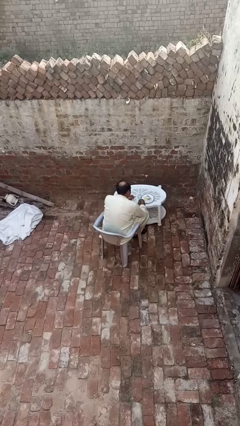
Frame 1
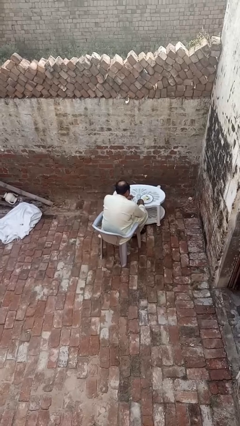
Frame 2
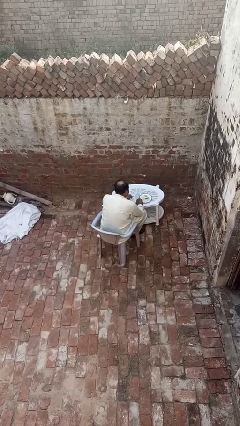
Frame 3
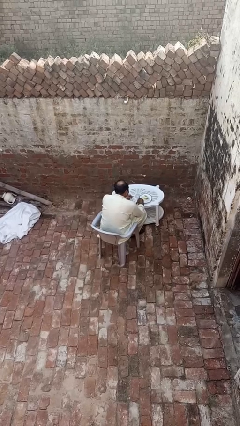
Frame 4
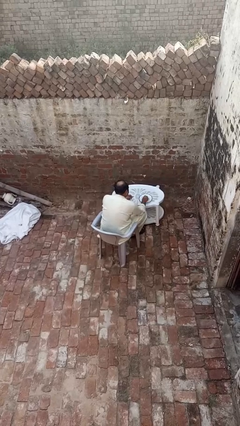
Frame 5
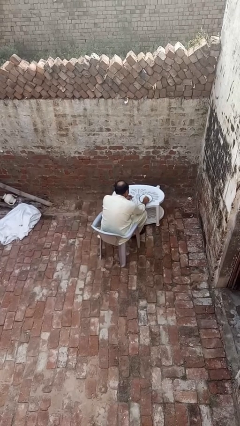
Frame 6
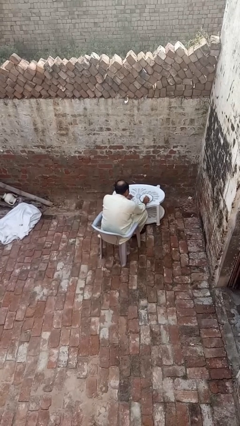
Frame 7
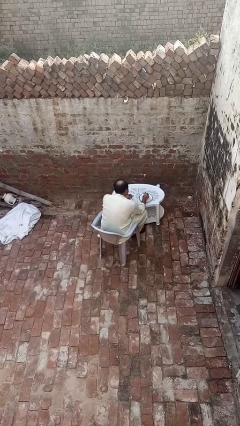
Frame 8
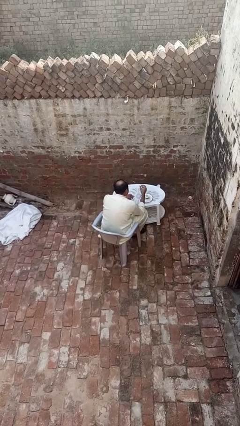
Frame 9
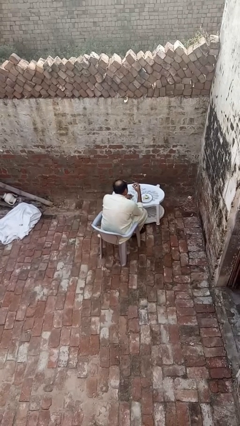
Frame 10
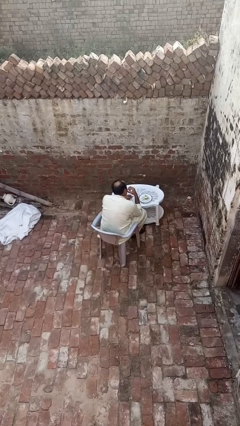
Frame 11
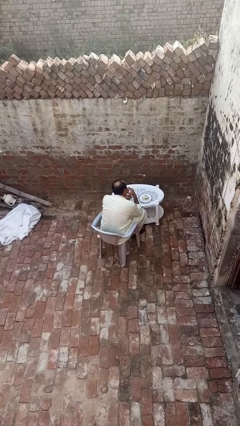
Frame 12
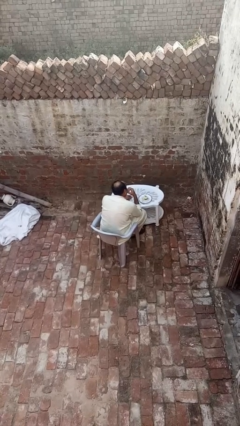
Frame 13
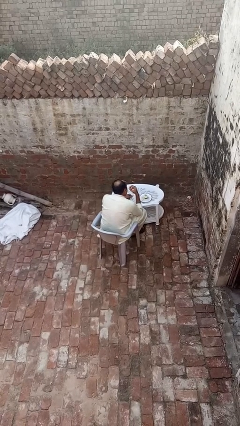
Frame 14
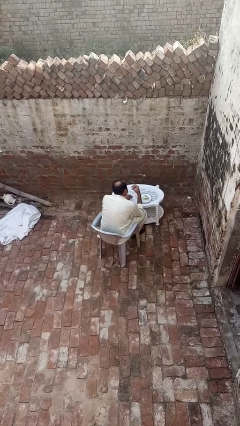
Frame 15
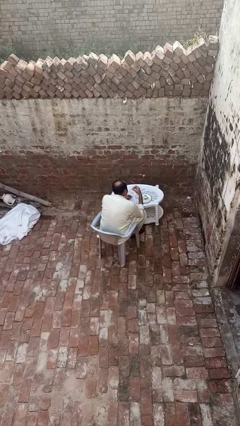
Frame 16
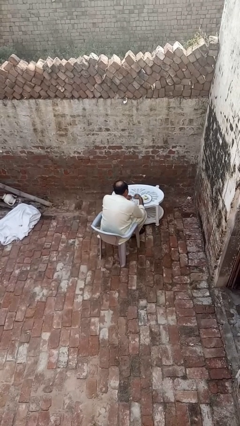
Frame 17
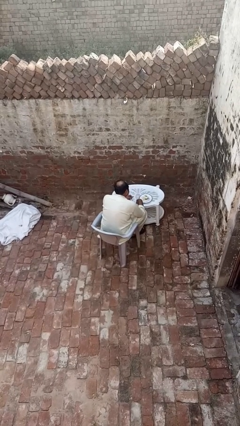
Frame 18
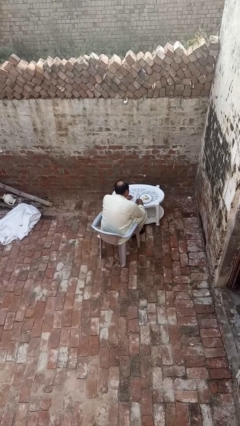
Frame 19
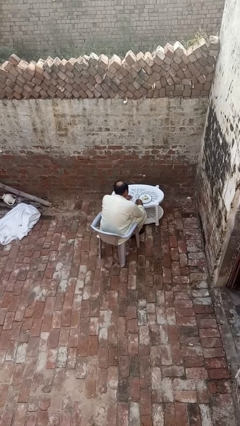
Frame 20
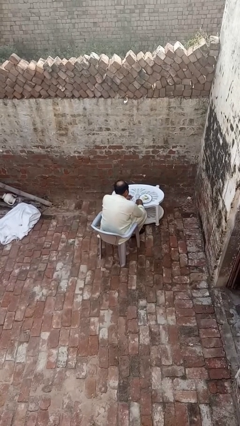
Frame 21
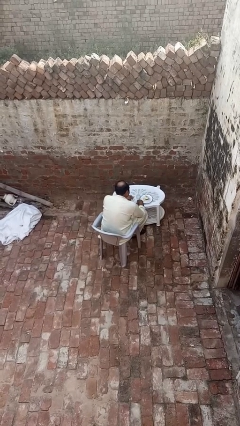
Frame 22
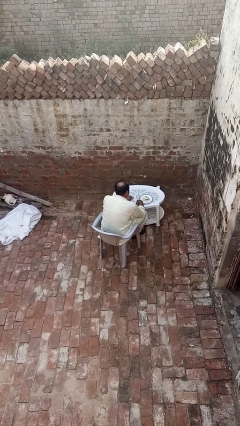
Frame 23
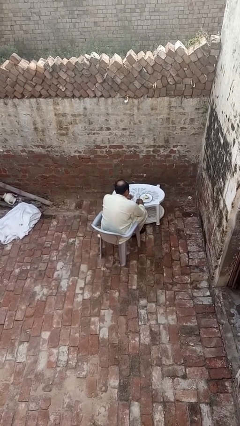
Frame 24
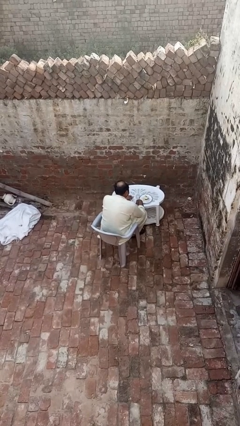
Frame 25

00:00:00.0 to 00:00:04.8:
person eats with hands

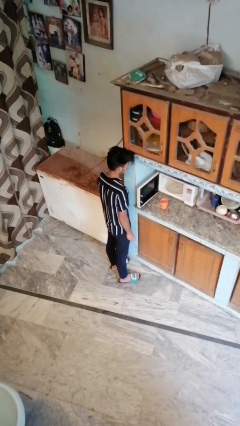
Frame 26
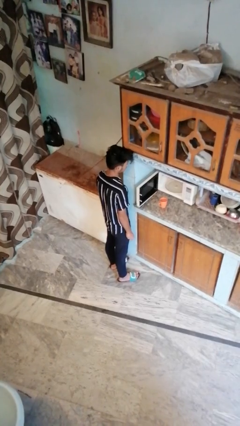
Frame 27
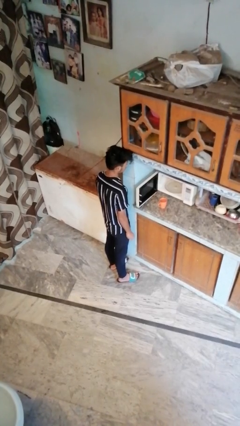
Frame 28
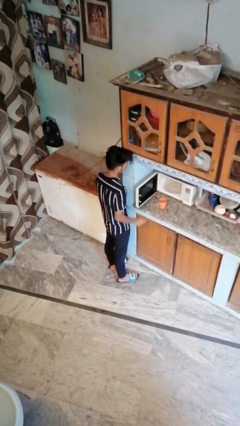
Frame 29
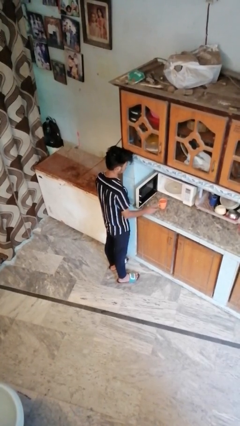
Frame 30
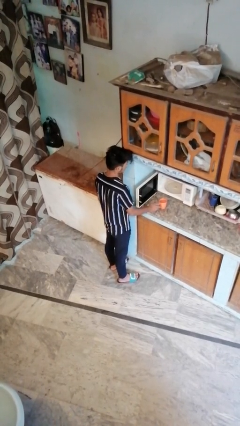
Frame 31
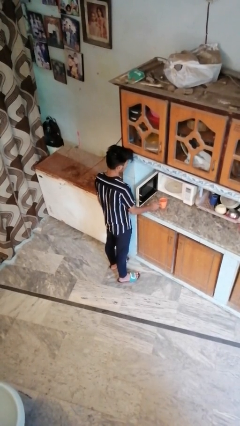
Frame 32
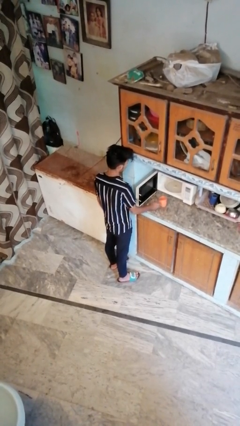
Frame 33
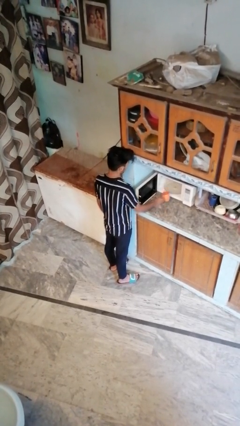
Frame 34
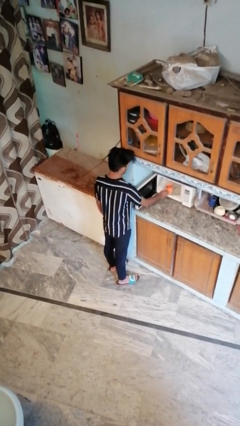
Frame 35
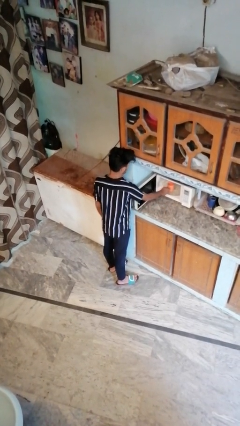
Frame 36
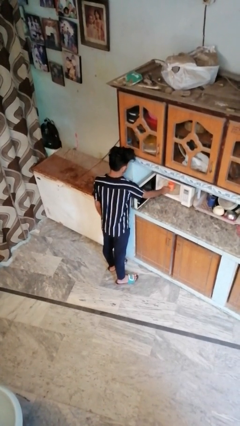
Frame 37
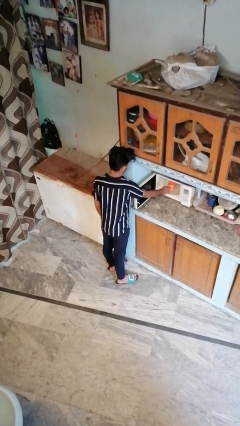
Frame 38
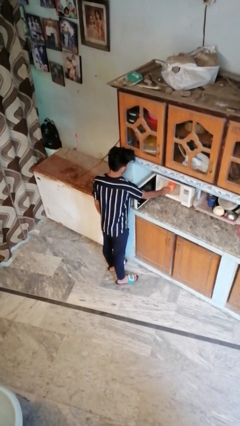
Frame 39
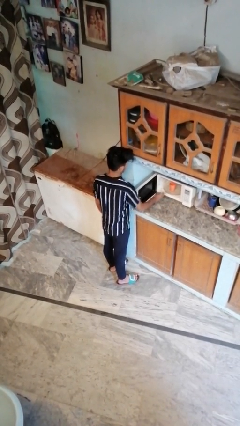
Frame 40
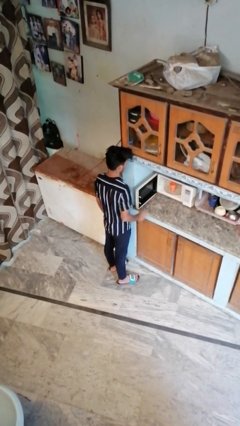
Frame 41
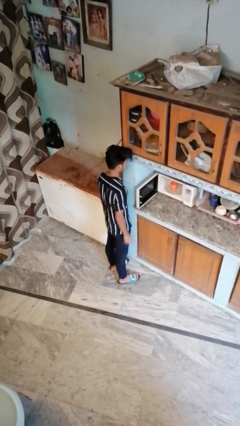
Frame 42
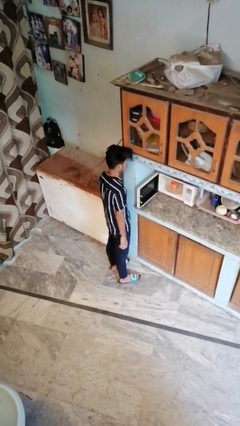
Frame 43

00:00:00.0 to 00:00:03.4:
person puts object into microwave

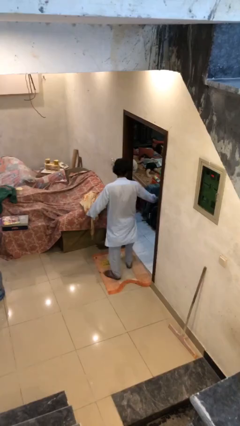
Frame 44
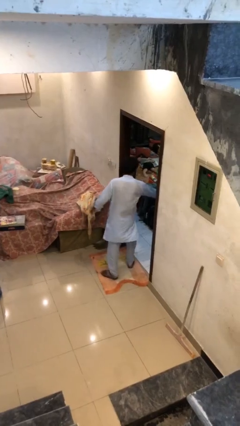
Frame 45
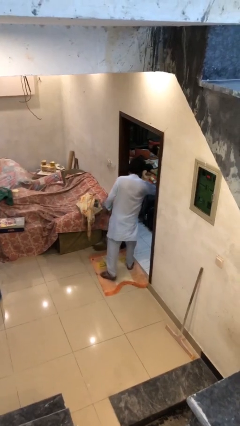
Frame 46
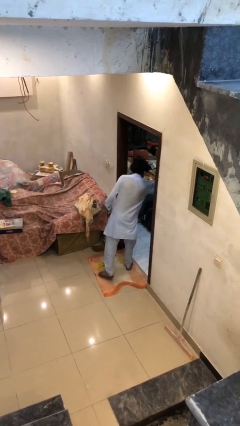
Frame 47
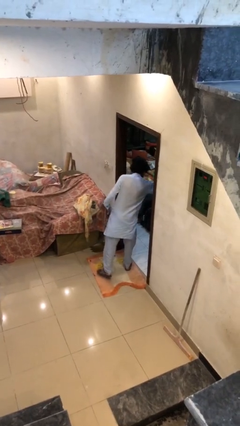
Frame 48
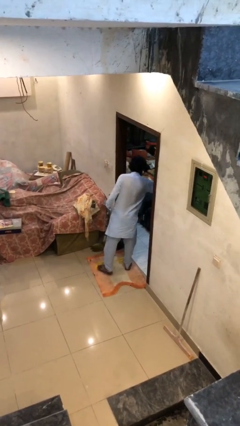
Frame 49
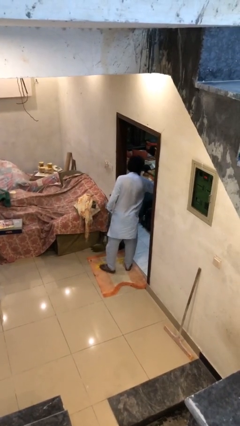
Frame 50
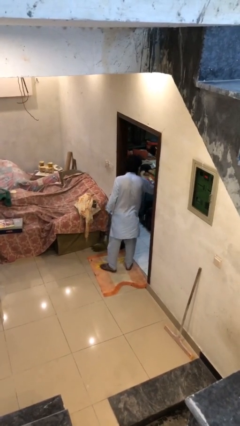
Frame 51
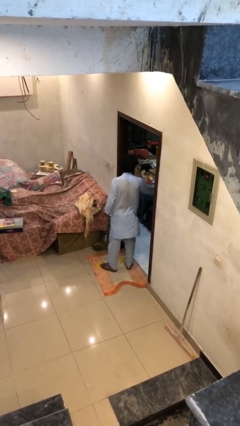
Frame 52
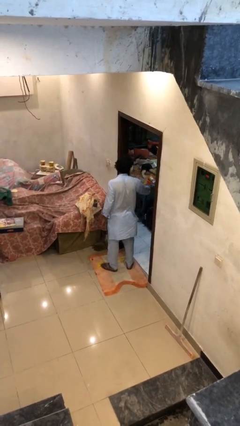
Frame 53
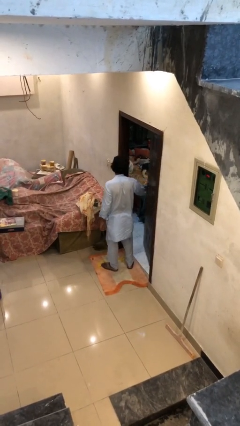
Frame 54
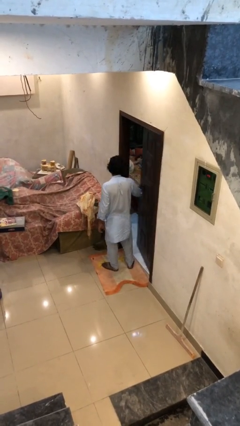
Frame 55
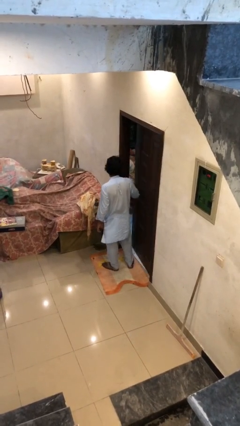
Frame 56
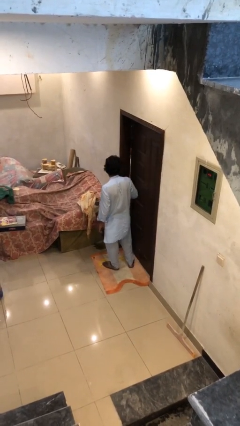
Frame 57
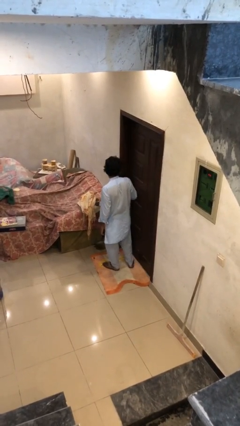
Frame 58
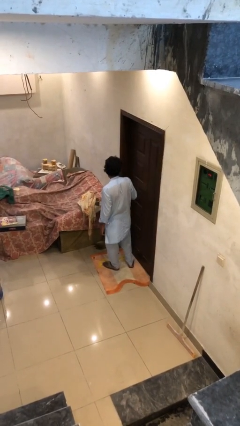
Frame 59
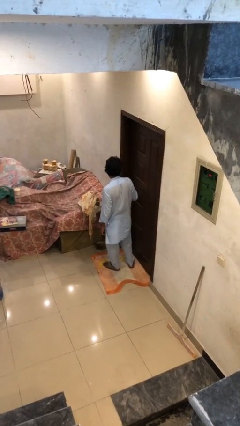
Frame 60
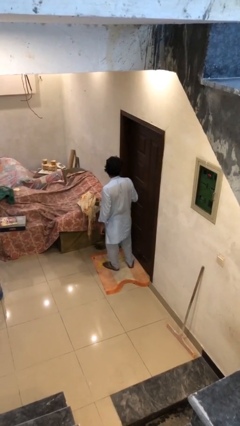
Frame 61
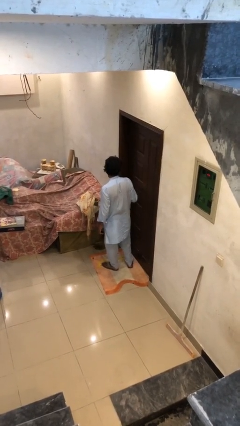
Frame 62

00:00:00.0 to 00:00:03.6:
person closes facility door

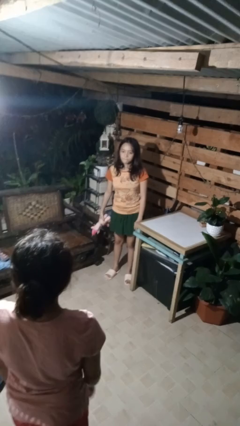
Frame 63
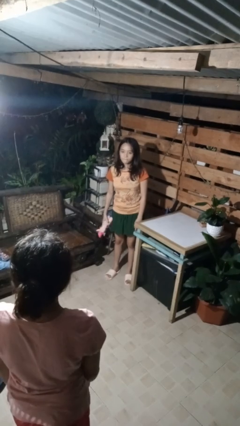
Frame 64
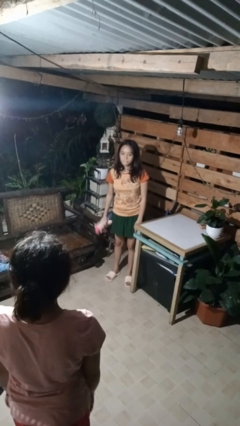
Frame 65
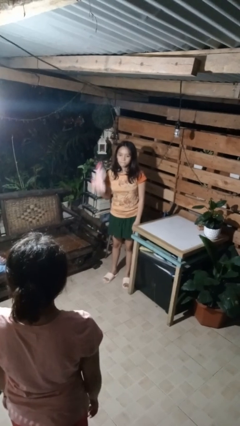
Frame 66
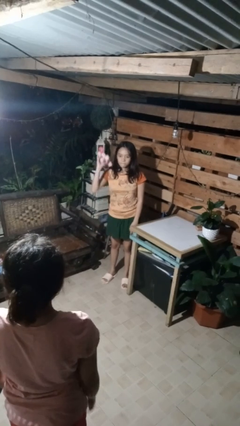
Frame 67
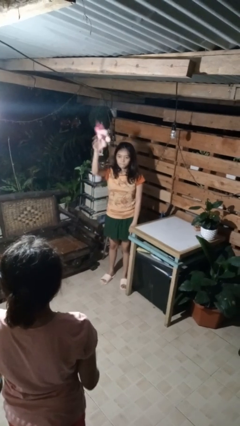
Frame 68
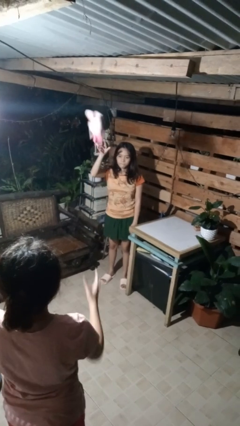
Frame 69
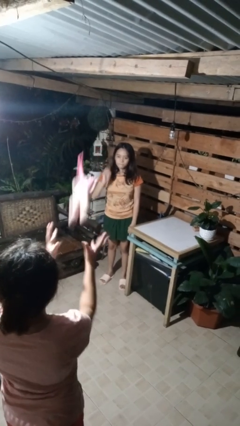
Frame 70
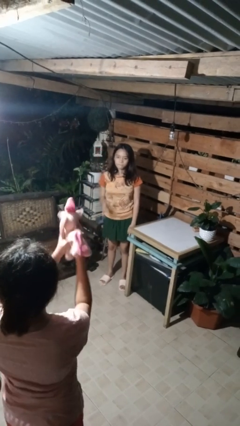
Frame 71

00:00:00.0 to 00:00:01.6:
person throws object to person

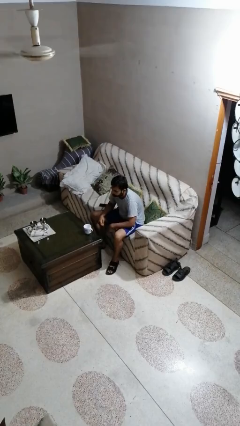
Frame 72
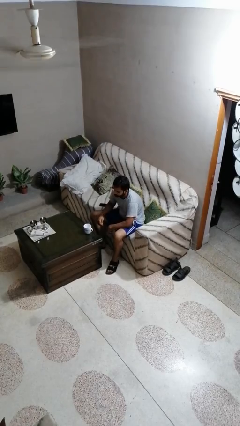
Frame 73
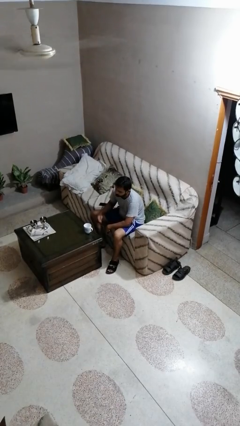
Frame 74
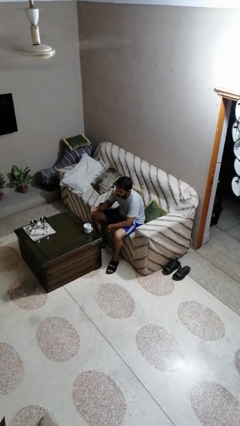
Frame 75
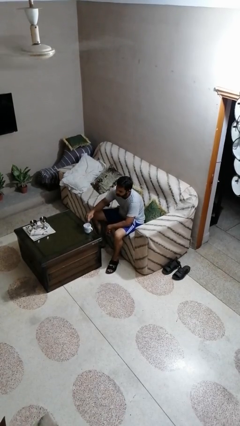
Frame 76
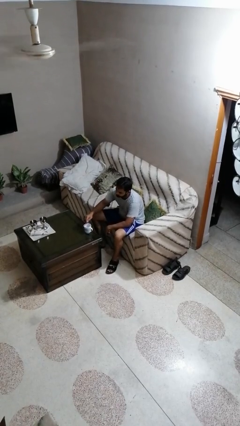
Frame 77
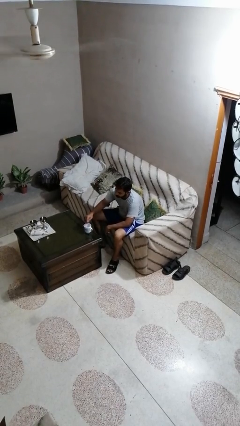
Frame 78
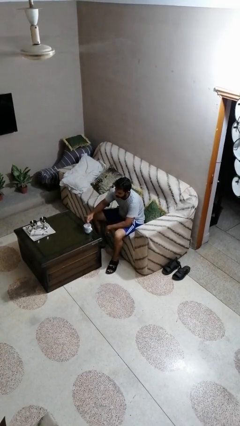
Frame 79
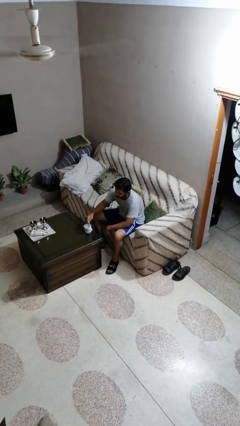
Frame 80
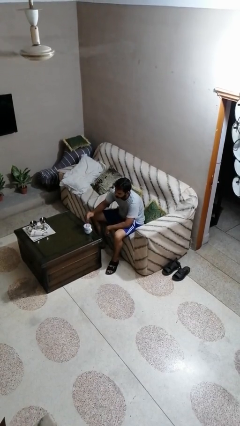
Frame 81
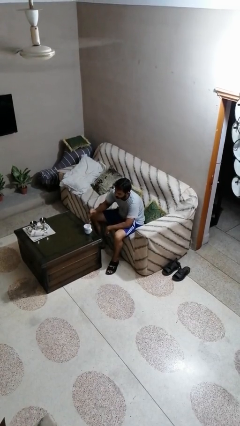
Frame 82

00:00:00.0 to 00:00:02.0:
person stirs mug

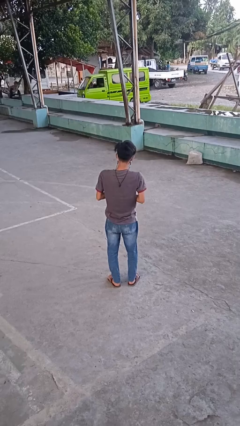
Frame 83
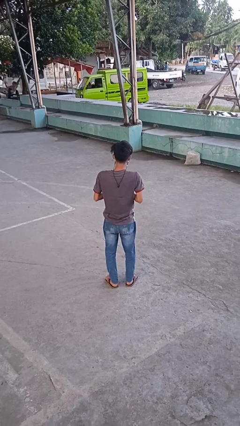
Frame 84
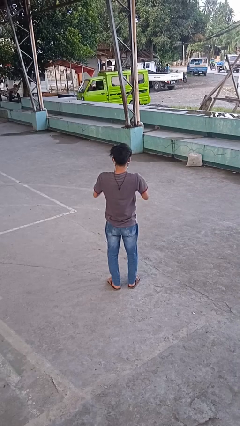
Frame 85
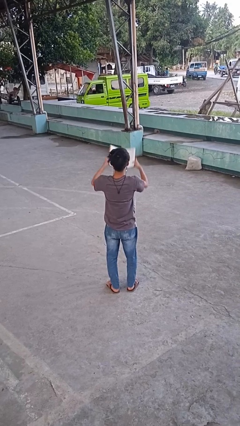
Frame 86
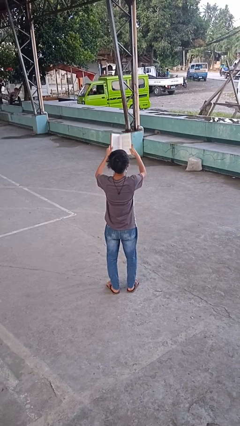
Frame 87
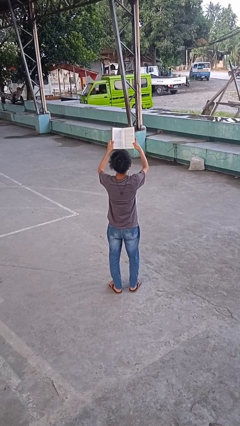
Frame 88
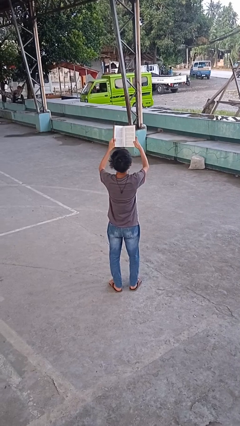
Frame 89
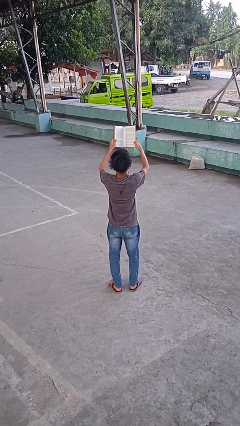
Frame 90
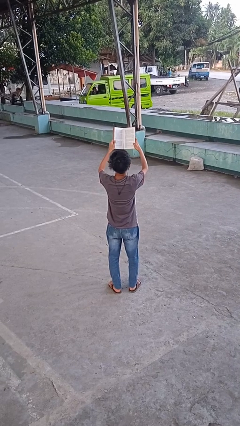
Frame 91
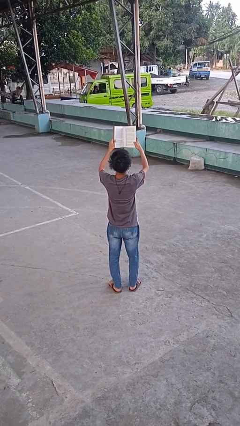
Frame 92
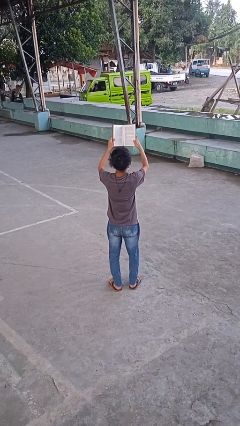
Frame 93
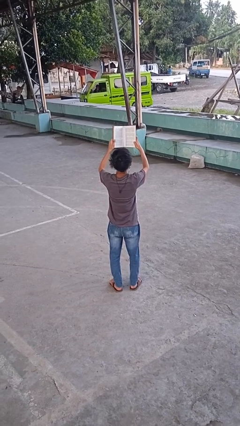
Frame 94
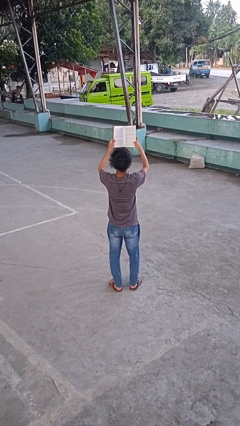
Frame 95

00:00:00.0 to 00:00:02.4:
person reads book
